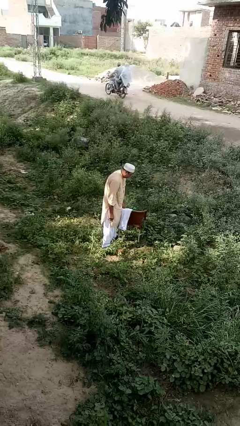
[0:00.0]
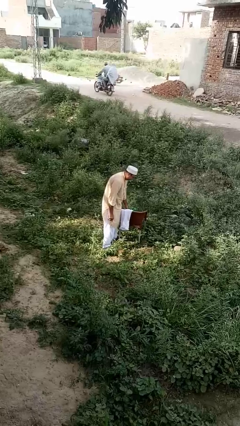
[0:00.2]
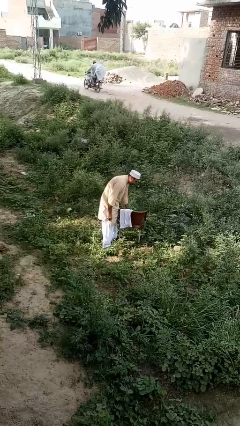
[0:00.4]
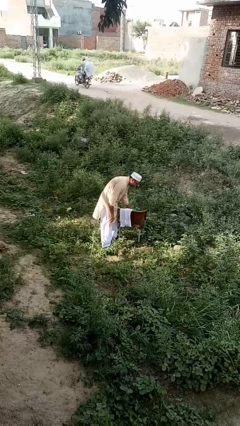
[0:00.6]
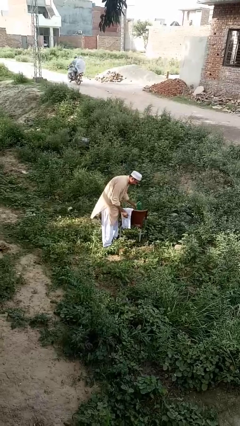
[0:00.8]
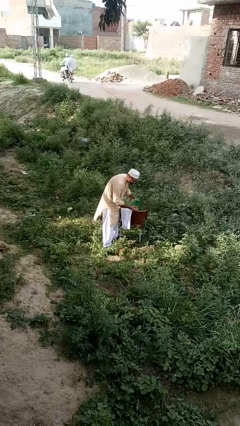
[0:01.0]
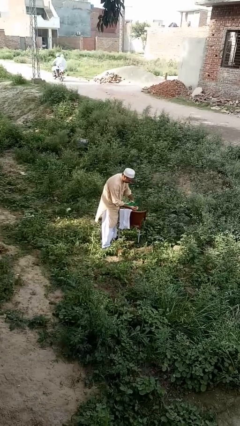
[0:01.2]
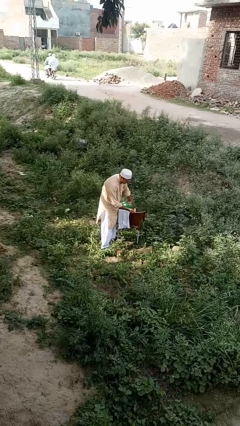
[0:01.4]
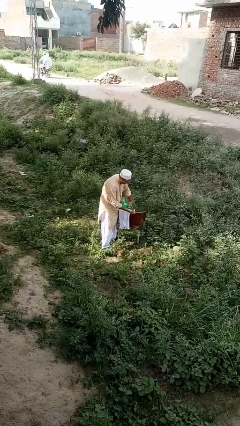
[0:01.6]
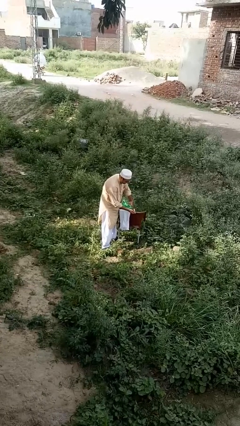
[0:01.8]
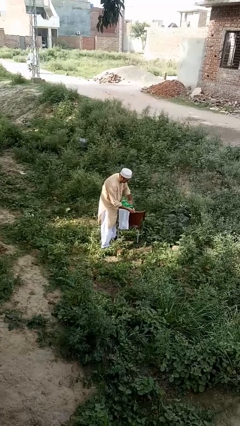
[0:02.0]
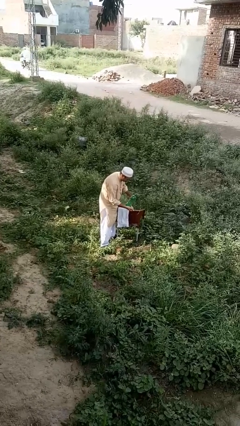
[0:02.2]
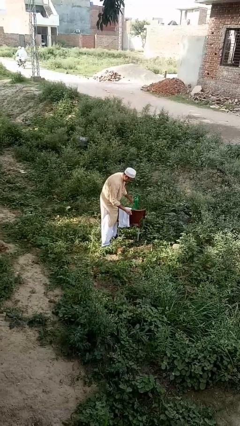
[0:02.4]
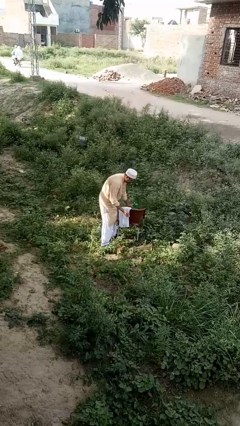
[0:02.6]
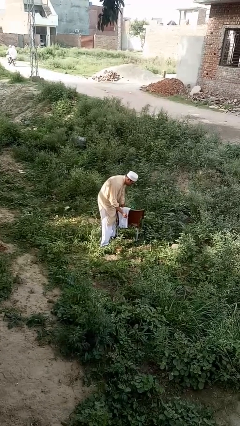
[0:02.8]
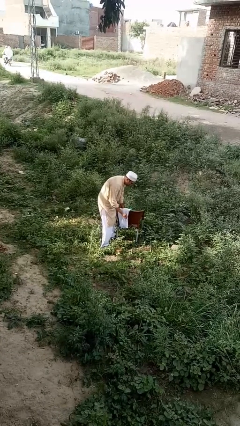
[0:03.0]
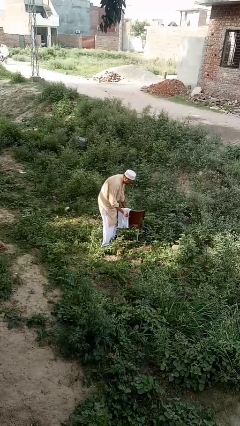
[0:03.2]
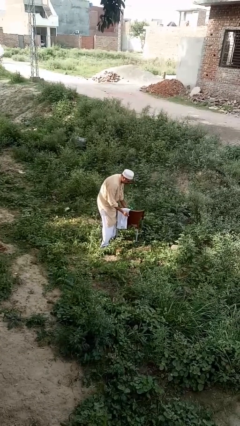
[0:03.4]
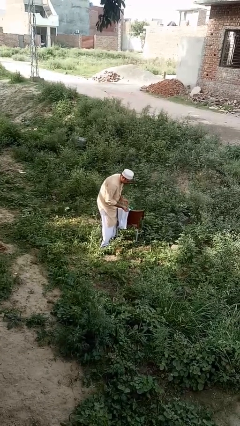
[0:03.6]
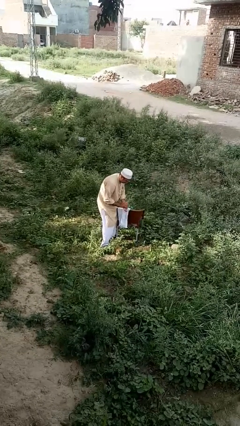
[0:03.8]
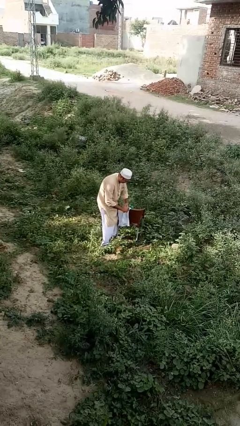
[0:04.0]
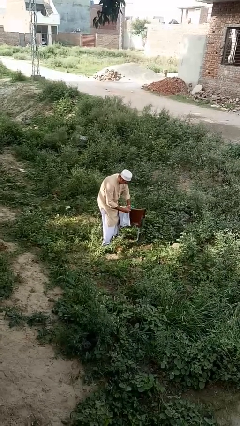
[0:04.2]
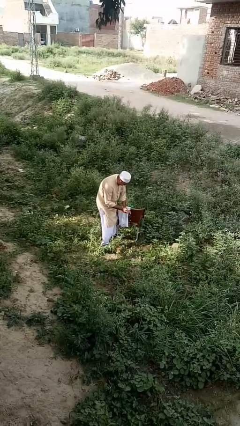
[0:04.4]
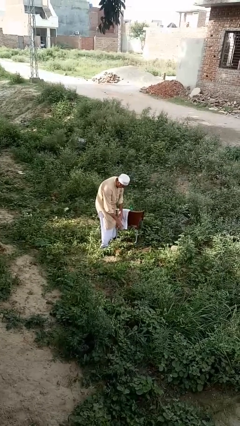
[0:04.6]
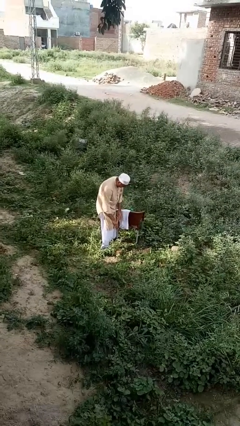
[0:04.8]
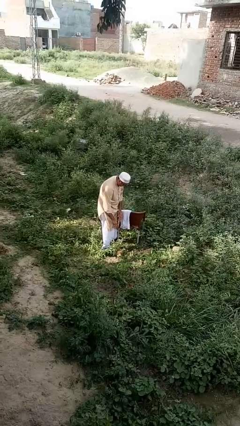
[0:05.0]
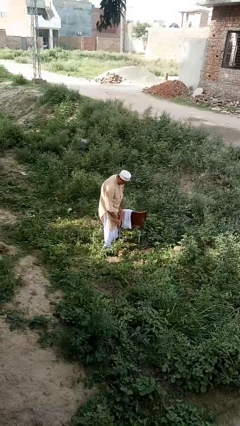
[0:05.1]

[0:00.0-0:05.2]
person washes hands
